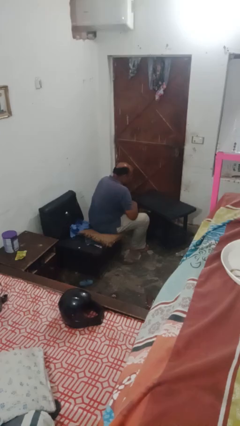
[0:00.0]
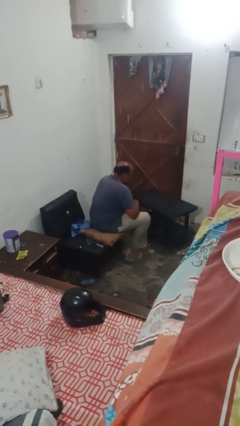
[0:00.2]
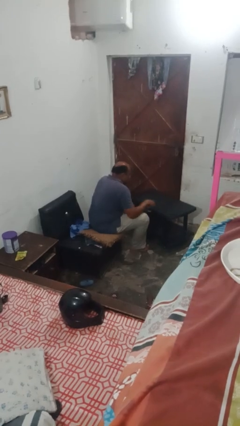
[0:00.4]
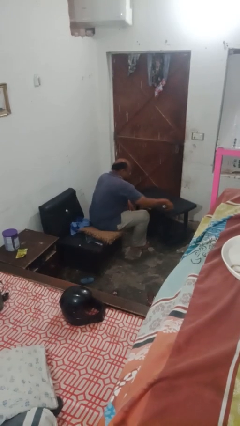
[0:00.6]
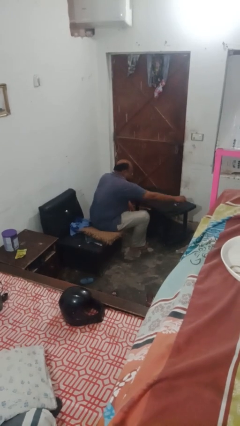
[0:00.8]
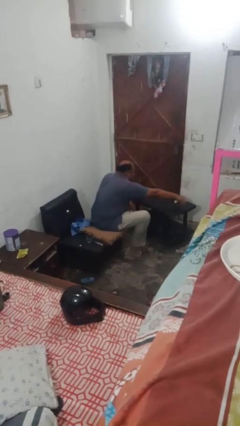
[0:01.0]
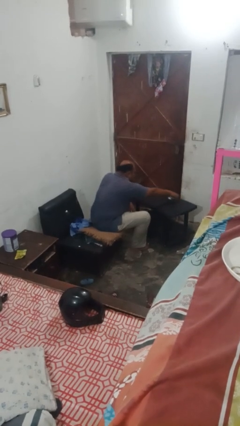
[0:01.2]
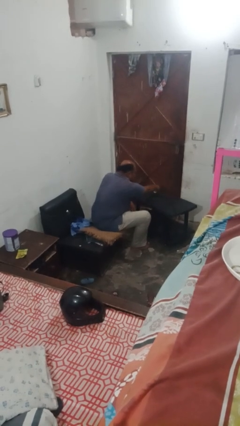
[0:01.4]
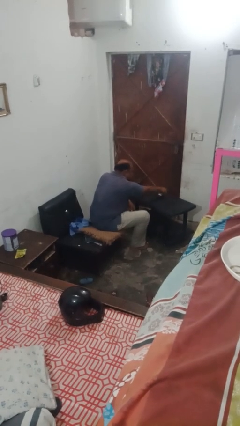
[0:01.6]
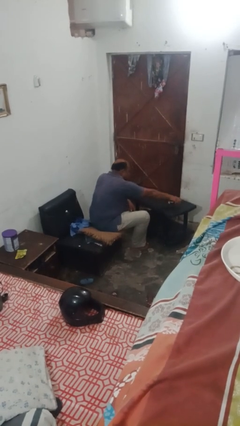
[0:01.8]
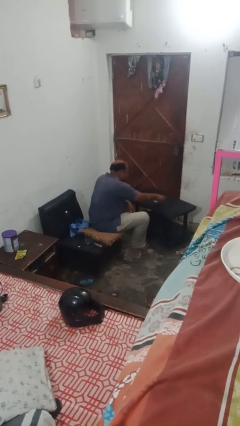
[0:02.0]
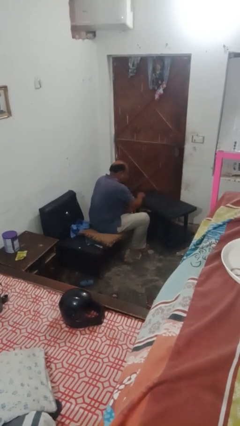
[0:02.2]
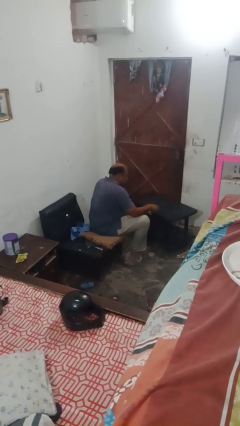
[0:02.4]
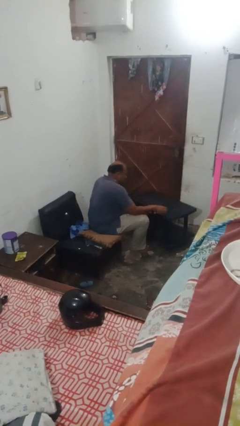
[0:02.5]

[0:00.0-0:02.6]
person sprays from bottle

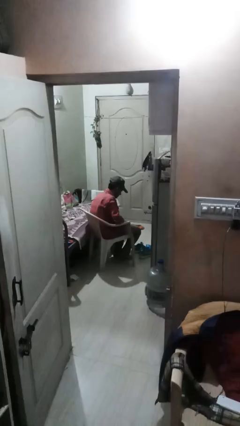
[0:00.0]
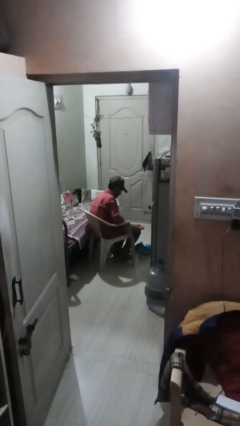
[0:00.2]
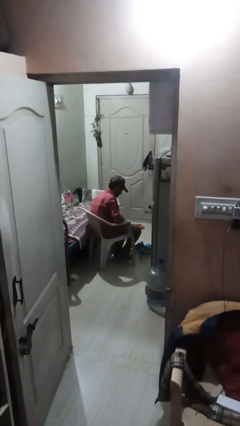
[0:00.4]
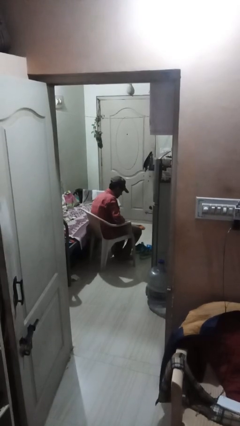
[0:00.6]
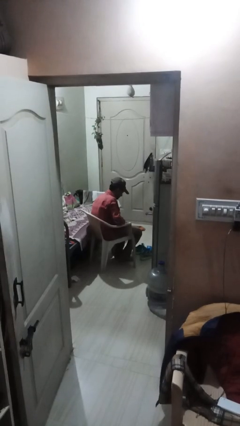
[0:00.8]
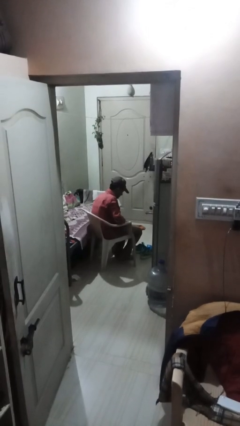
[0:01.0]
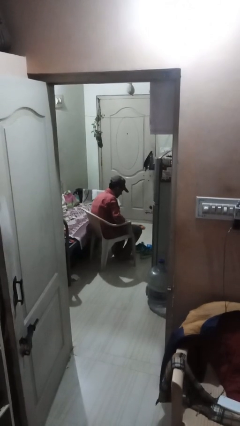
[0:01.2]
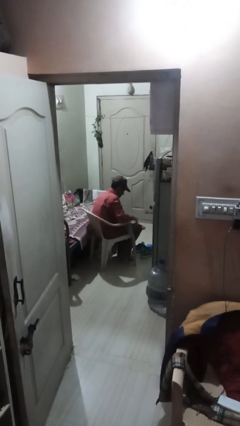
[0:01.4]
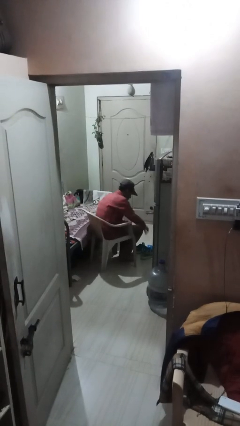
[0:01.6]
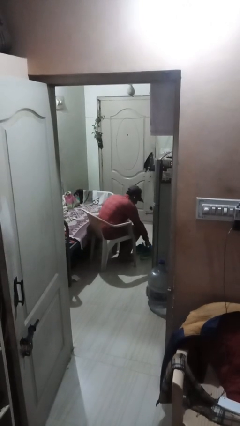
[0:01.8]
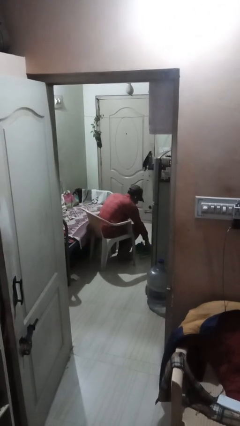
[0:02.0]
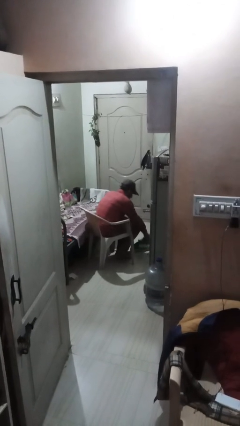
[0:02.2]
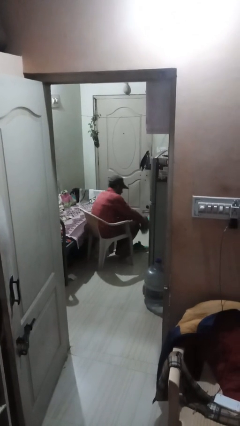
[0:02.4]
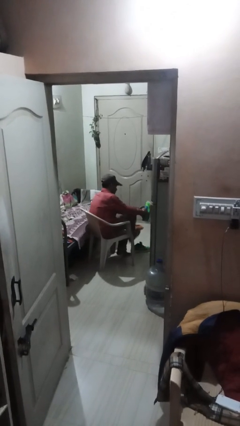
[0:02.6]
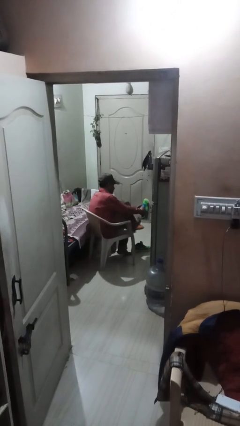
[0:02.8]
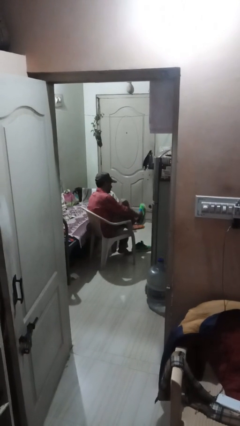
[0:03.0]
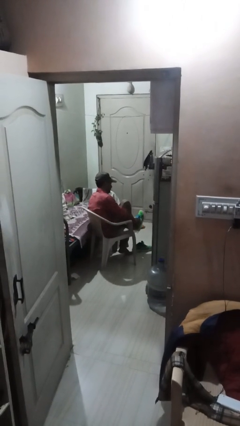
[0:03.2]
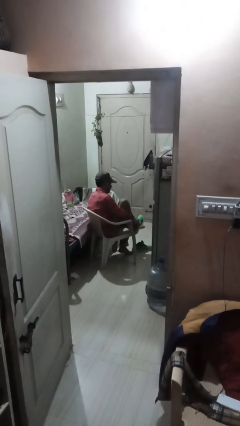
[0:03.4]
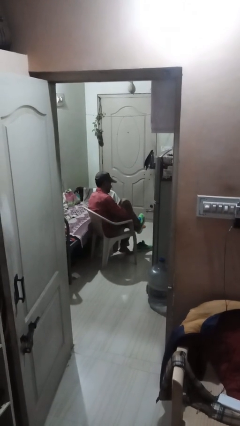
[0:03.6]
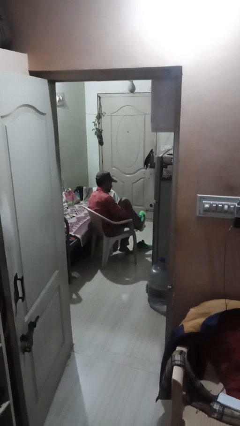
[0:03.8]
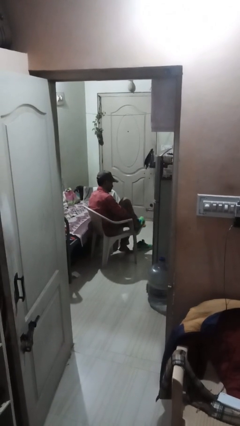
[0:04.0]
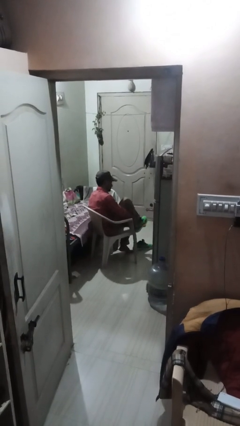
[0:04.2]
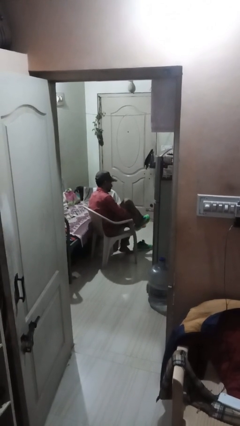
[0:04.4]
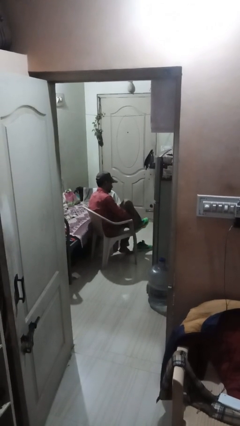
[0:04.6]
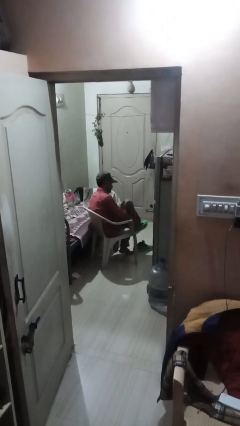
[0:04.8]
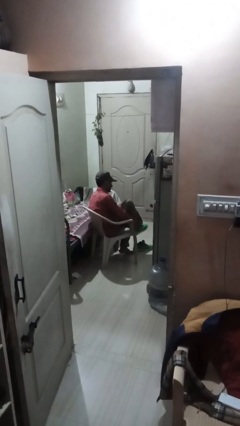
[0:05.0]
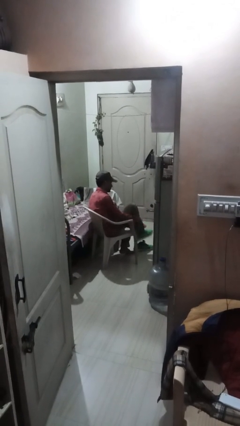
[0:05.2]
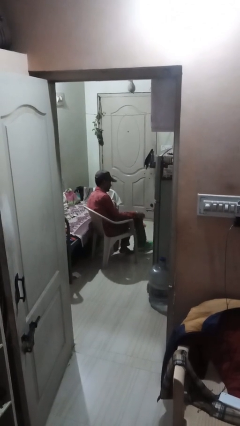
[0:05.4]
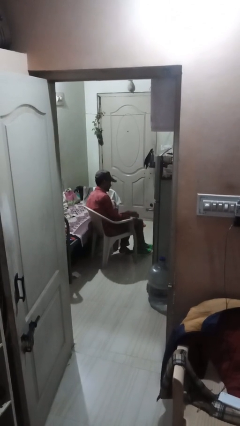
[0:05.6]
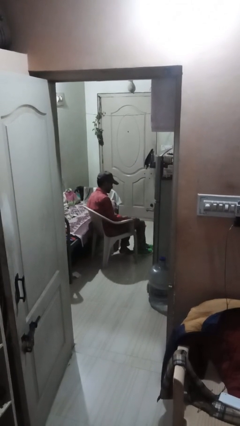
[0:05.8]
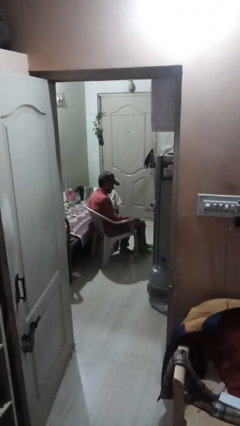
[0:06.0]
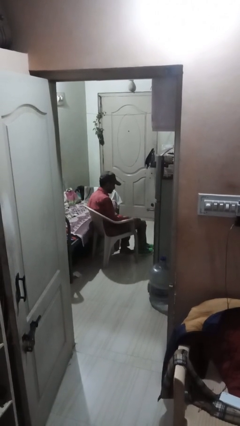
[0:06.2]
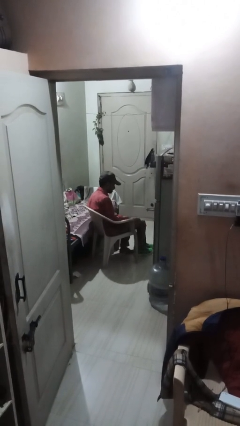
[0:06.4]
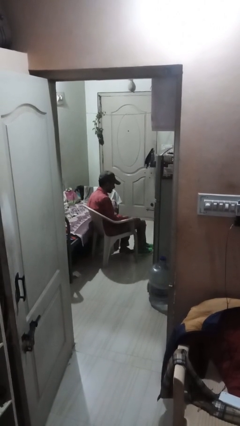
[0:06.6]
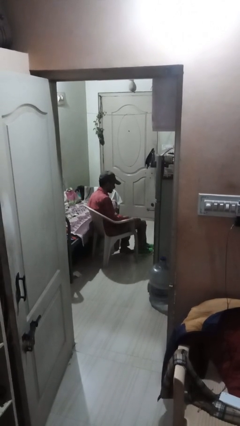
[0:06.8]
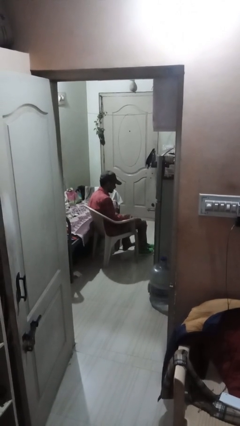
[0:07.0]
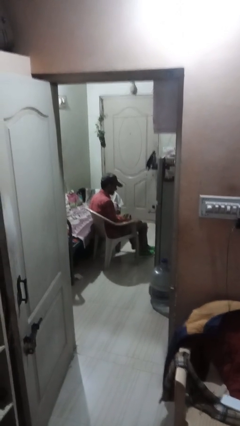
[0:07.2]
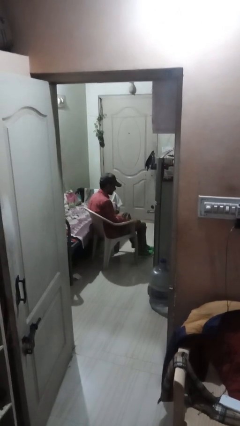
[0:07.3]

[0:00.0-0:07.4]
person puts on shoes

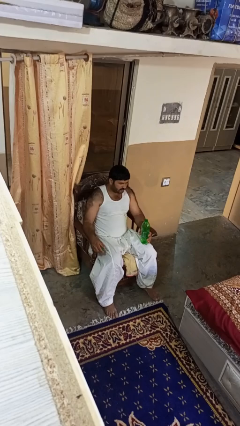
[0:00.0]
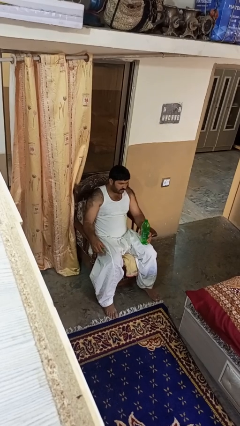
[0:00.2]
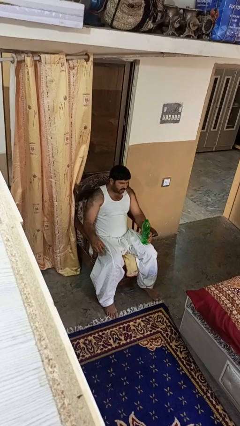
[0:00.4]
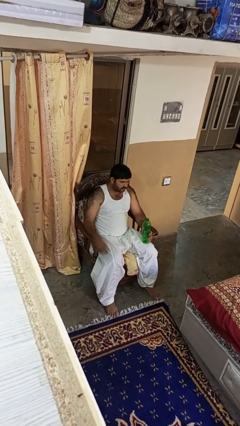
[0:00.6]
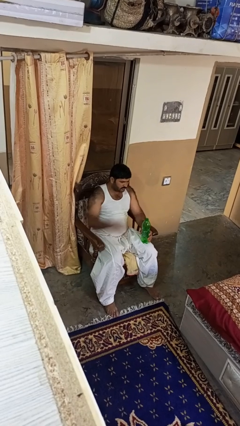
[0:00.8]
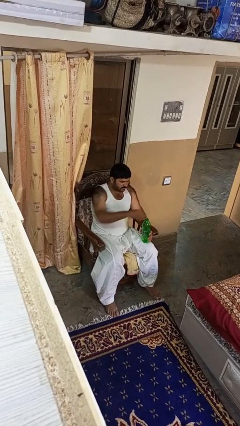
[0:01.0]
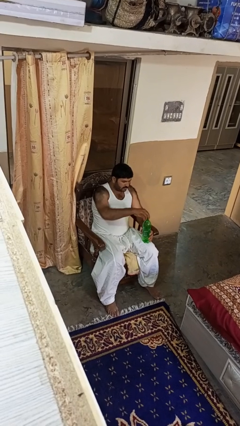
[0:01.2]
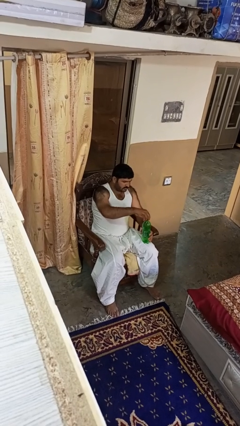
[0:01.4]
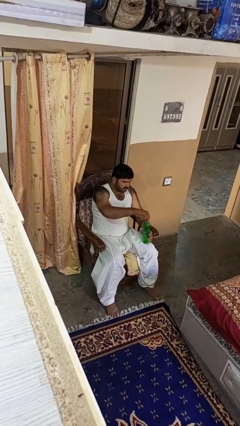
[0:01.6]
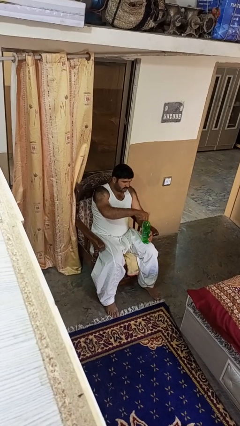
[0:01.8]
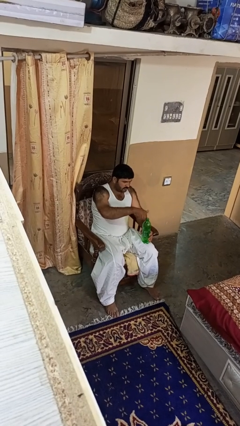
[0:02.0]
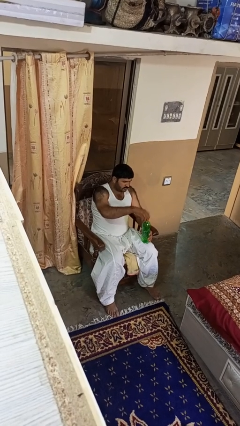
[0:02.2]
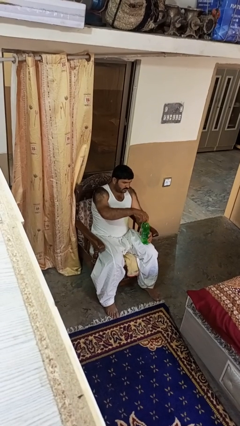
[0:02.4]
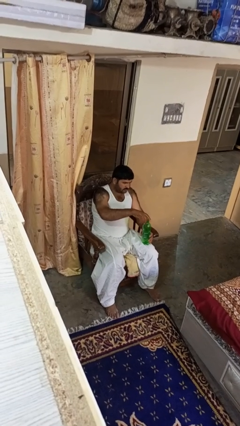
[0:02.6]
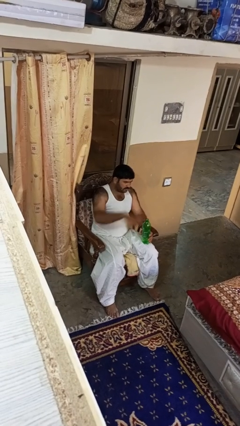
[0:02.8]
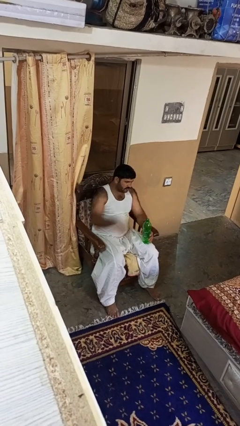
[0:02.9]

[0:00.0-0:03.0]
person screws lid to bottle

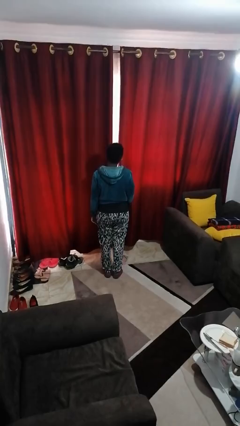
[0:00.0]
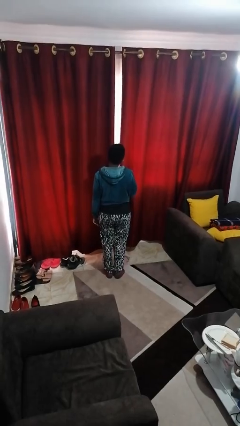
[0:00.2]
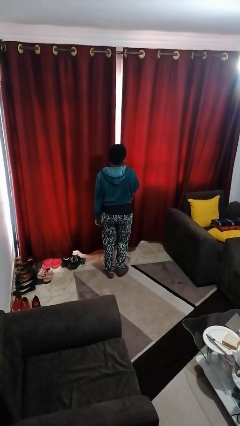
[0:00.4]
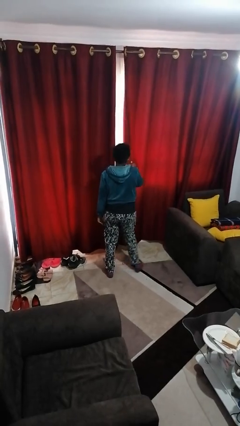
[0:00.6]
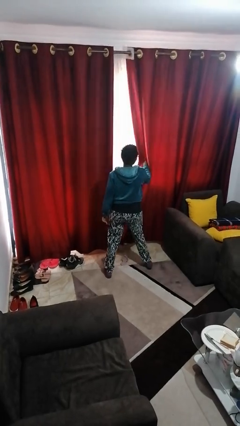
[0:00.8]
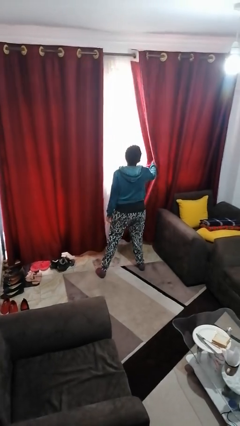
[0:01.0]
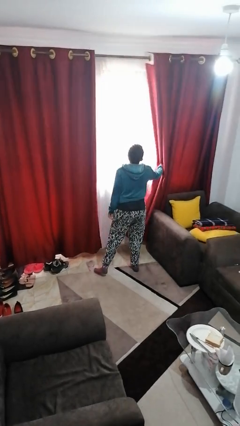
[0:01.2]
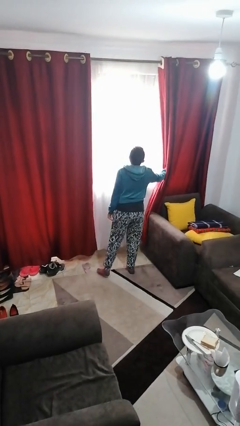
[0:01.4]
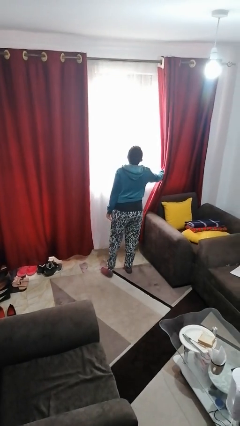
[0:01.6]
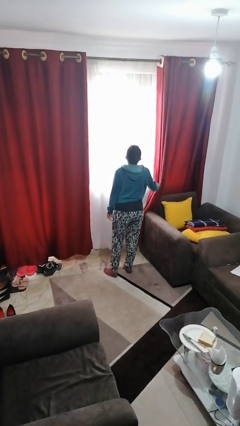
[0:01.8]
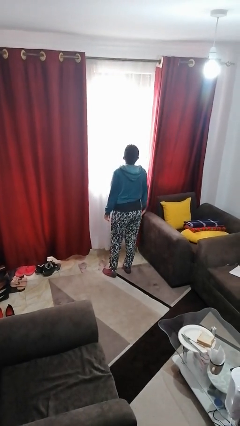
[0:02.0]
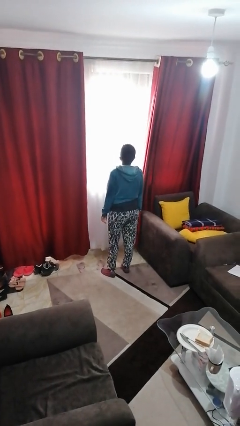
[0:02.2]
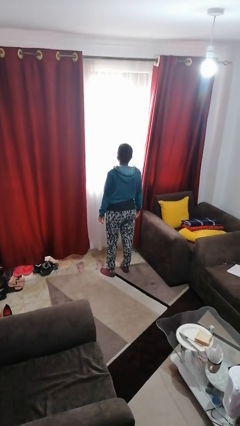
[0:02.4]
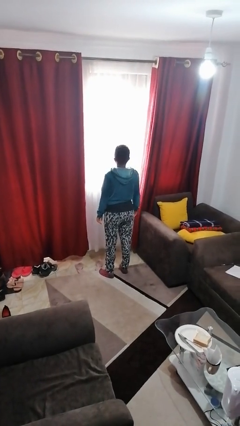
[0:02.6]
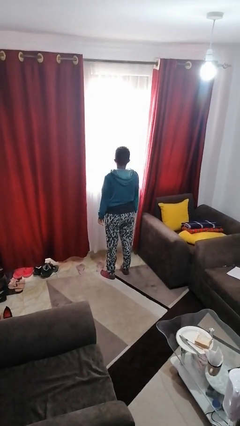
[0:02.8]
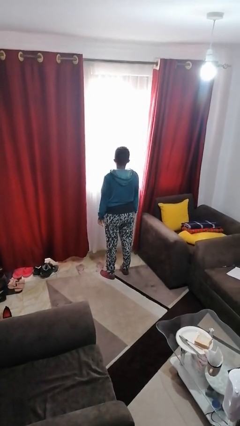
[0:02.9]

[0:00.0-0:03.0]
person opens curtains

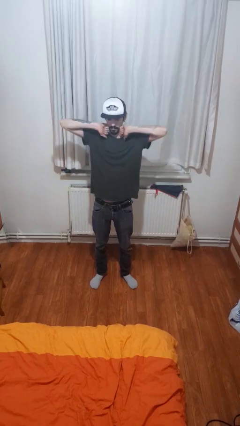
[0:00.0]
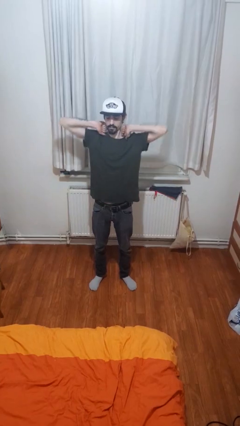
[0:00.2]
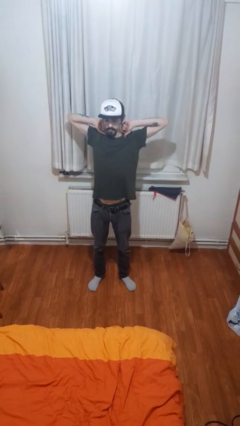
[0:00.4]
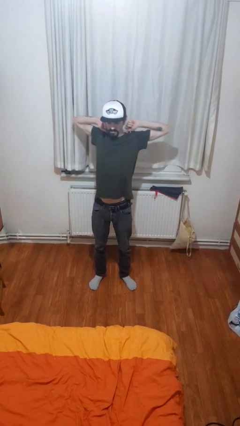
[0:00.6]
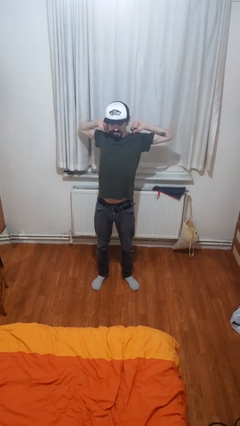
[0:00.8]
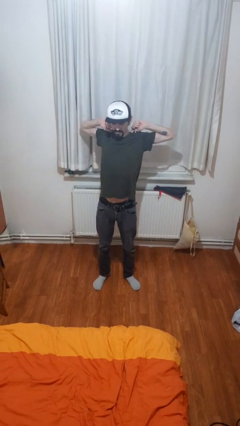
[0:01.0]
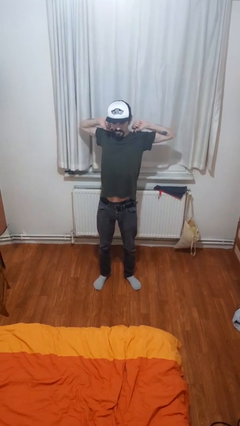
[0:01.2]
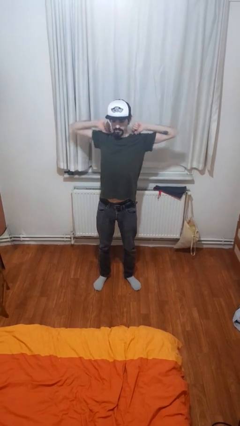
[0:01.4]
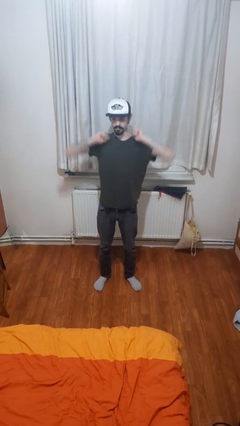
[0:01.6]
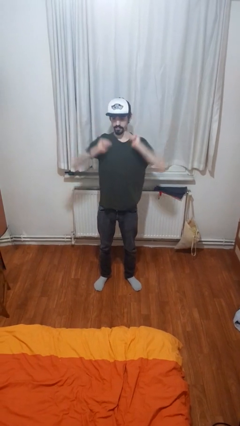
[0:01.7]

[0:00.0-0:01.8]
person stretches arms to side
